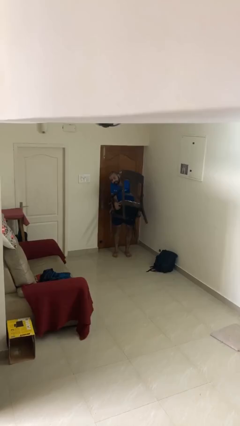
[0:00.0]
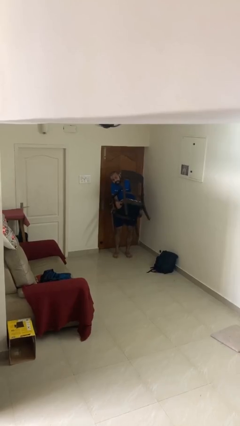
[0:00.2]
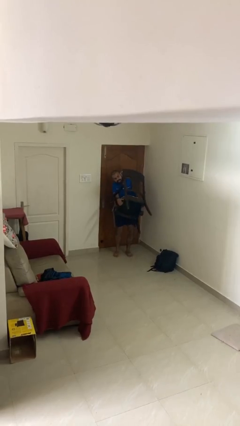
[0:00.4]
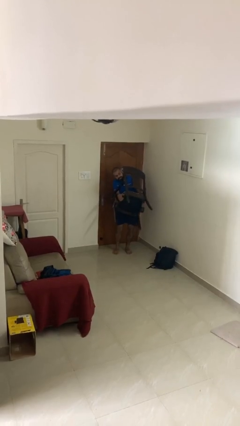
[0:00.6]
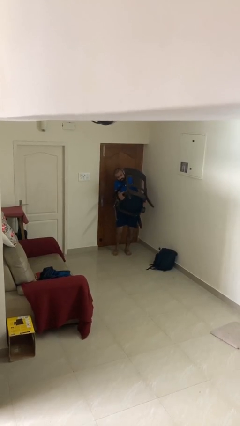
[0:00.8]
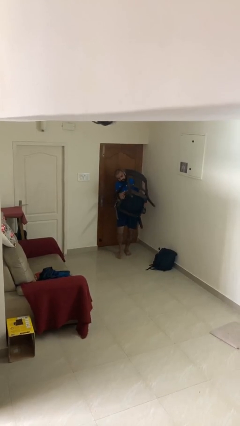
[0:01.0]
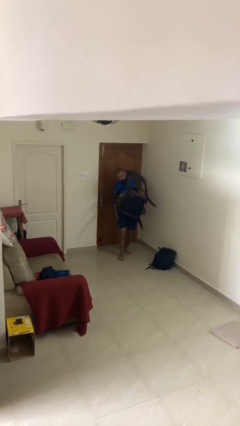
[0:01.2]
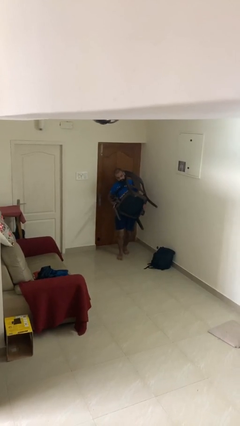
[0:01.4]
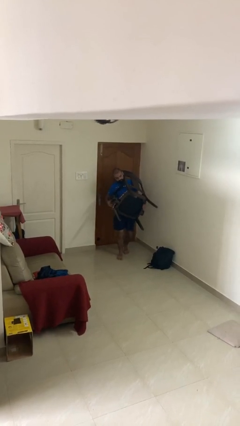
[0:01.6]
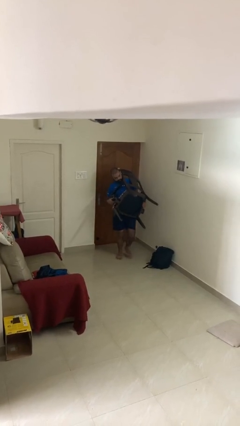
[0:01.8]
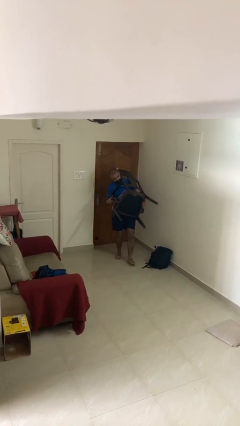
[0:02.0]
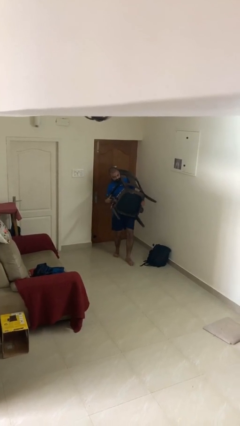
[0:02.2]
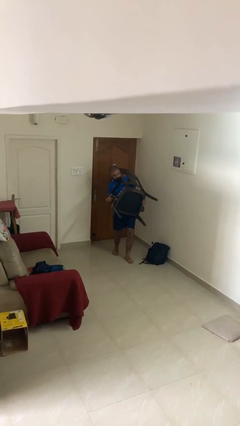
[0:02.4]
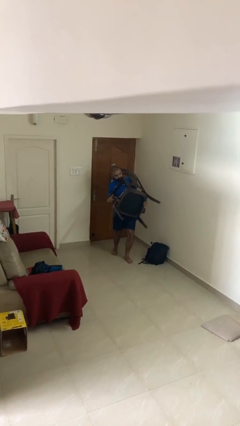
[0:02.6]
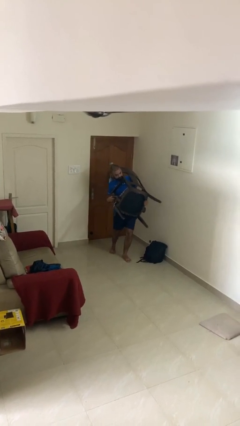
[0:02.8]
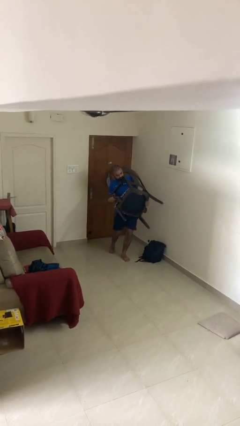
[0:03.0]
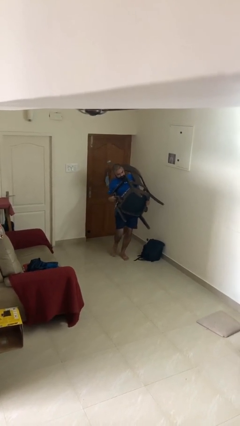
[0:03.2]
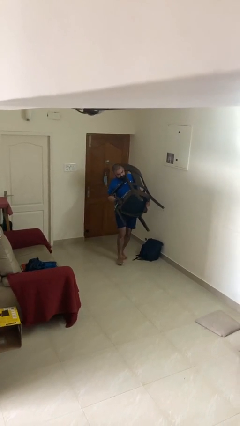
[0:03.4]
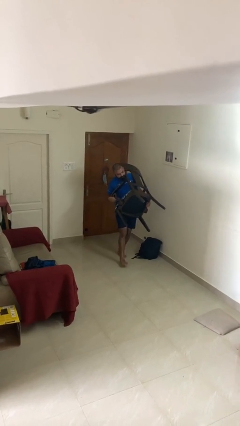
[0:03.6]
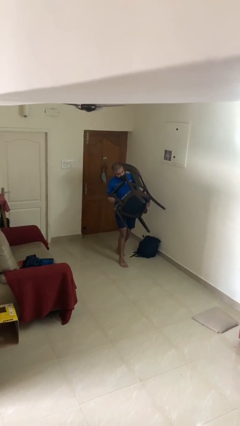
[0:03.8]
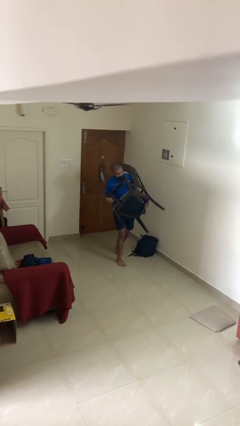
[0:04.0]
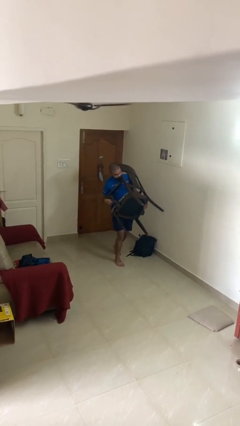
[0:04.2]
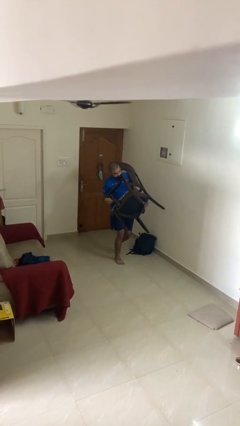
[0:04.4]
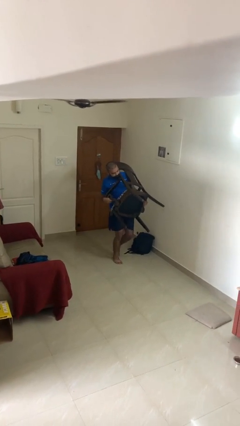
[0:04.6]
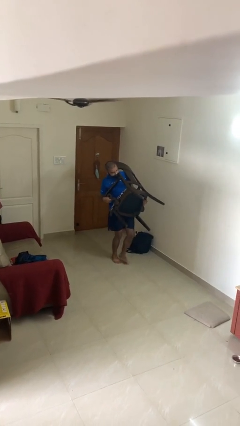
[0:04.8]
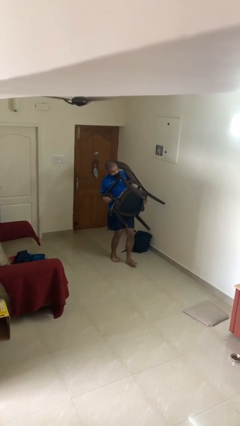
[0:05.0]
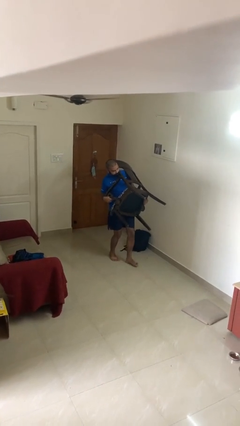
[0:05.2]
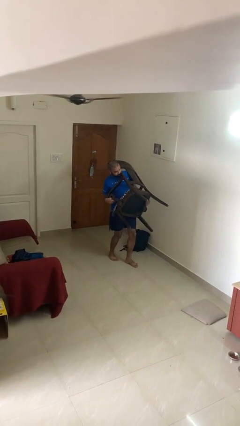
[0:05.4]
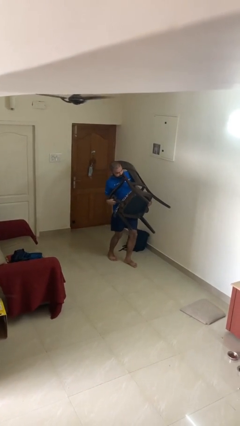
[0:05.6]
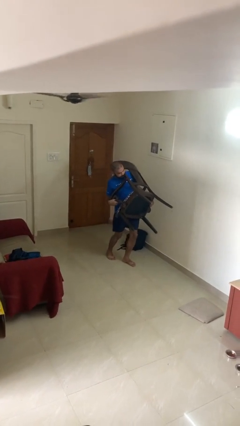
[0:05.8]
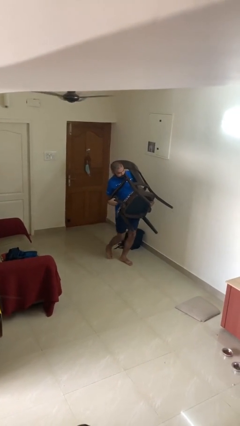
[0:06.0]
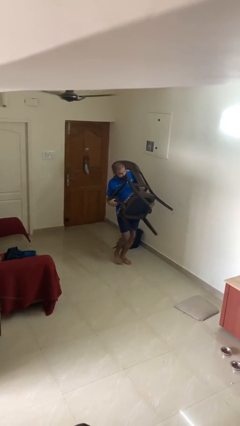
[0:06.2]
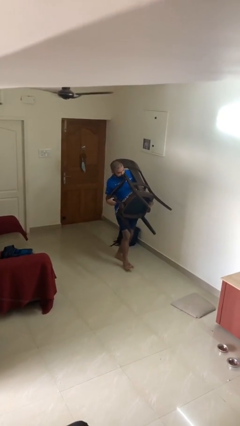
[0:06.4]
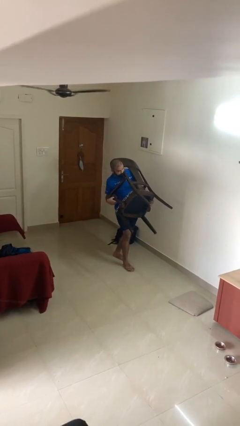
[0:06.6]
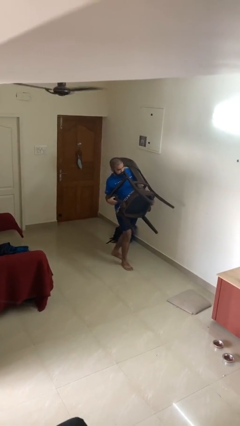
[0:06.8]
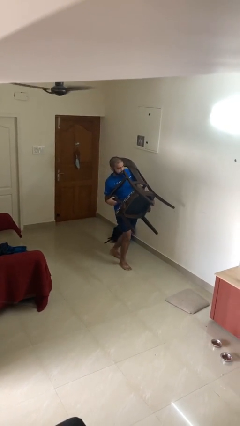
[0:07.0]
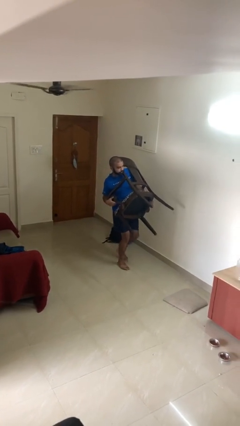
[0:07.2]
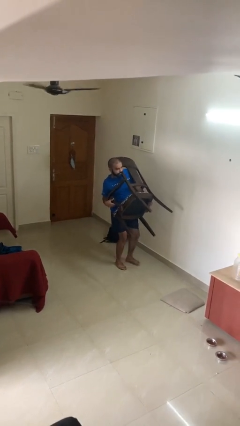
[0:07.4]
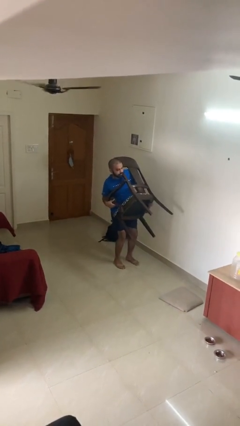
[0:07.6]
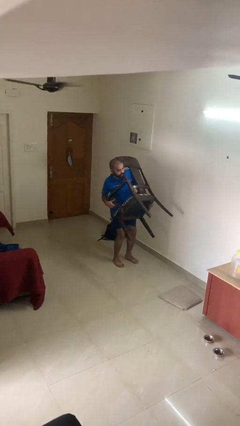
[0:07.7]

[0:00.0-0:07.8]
person carries heavy object

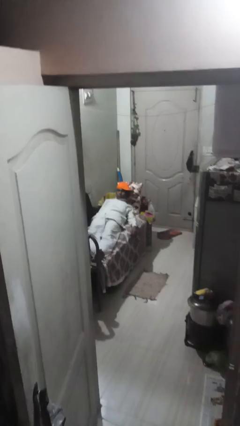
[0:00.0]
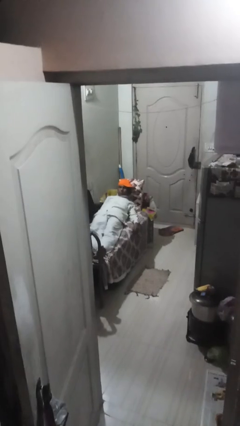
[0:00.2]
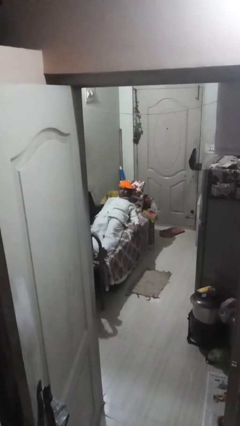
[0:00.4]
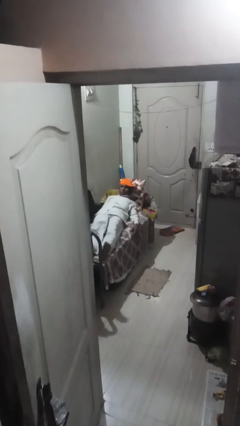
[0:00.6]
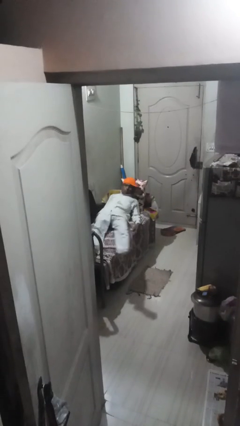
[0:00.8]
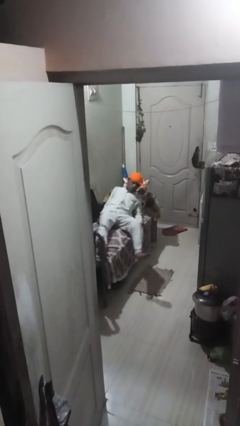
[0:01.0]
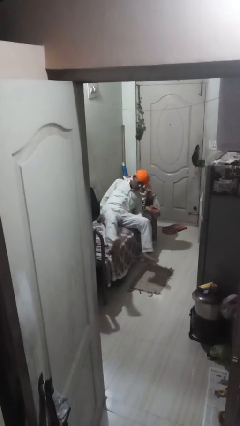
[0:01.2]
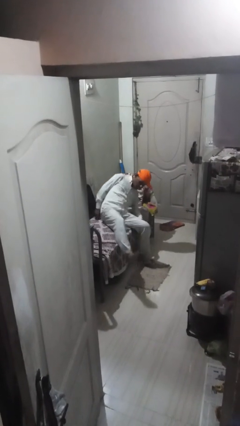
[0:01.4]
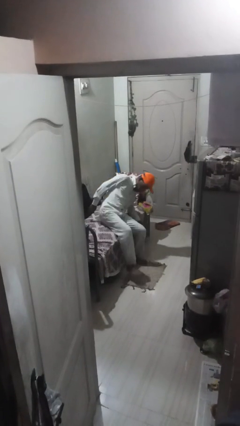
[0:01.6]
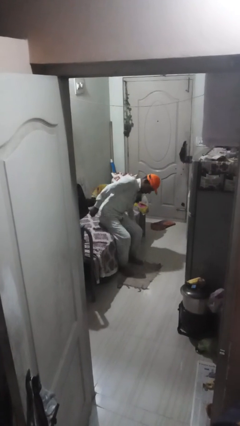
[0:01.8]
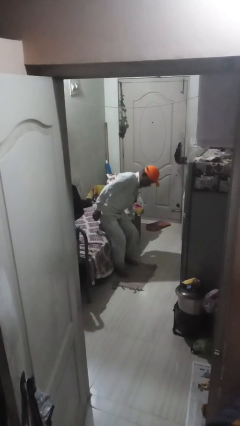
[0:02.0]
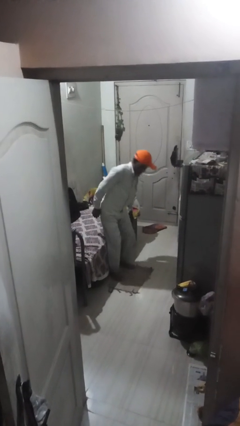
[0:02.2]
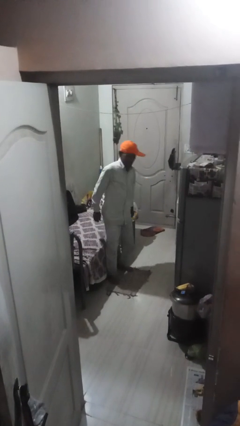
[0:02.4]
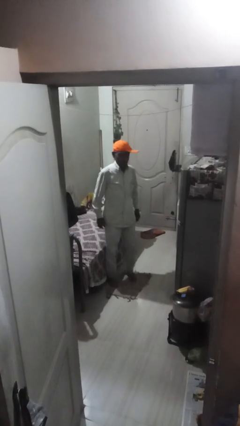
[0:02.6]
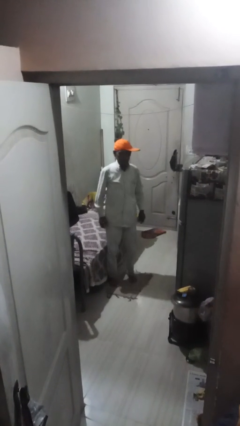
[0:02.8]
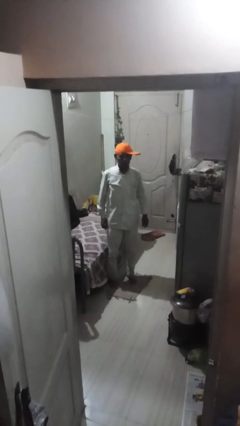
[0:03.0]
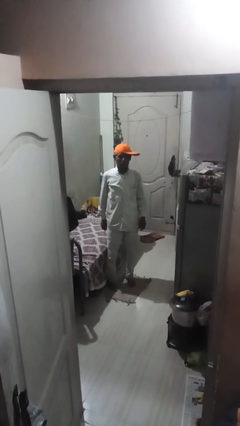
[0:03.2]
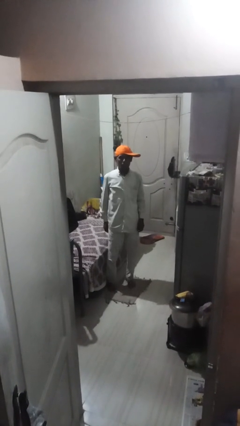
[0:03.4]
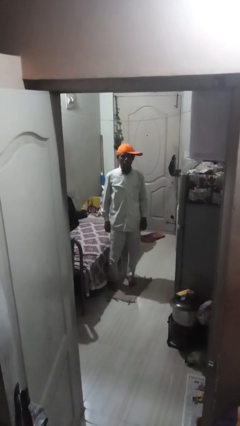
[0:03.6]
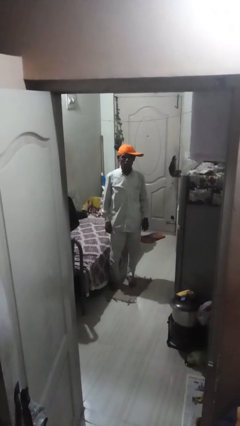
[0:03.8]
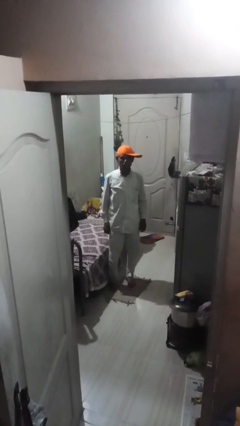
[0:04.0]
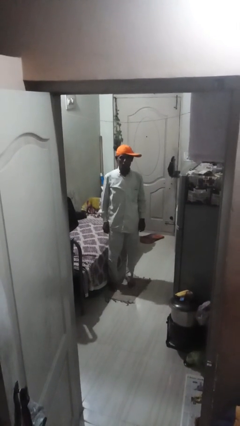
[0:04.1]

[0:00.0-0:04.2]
person stands up

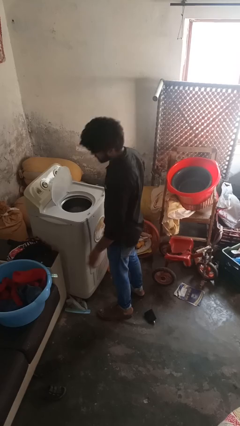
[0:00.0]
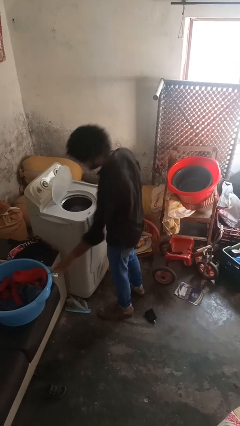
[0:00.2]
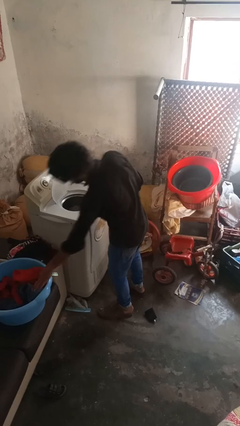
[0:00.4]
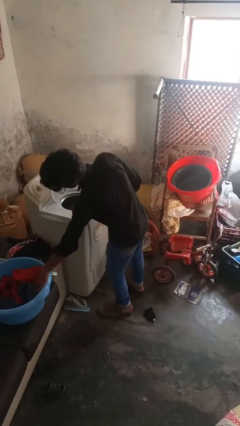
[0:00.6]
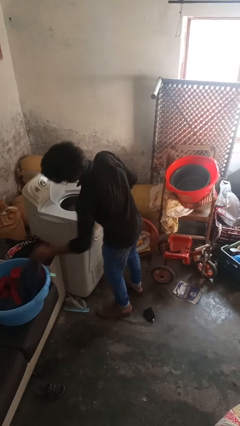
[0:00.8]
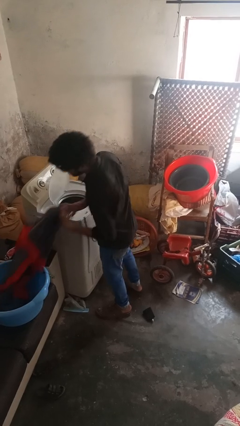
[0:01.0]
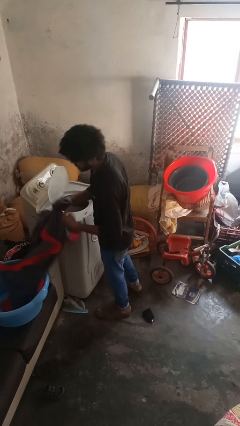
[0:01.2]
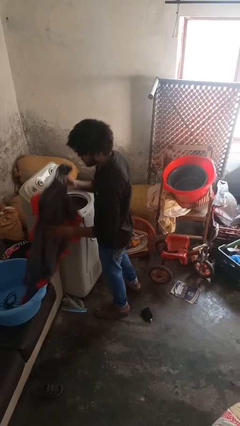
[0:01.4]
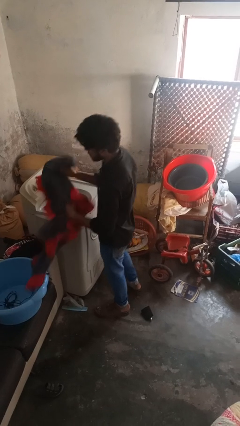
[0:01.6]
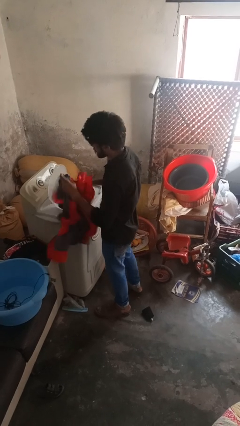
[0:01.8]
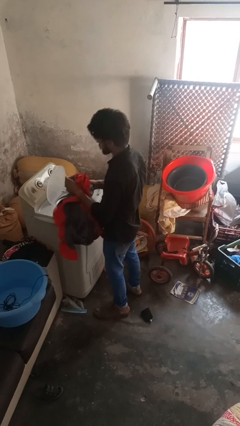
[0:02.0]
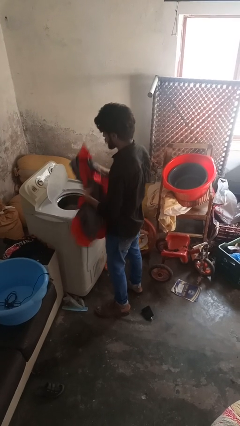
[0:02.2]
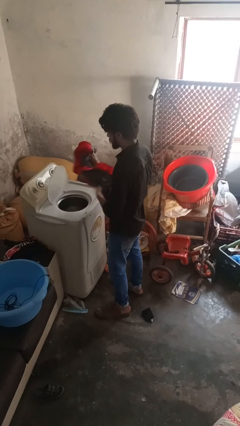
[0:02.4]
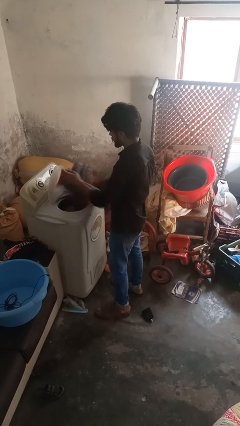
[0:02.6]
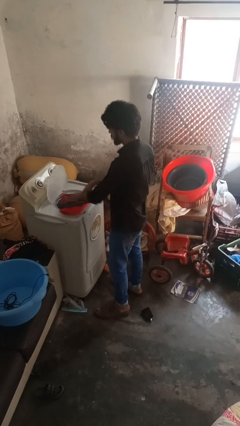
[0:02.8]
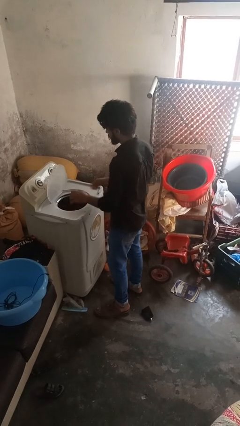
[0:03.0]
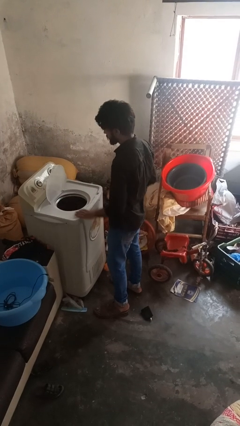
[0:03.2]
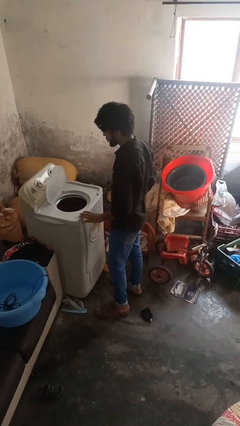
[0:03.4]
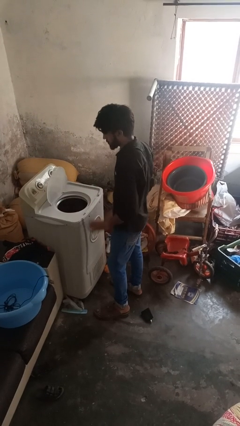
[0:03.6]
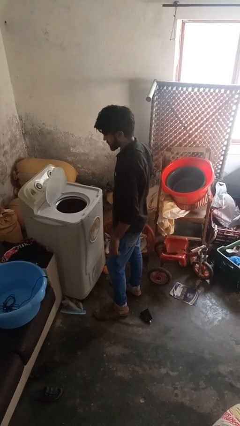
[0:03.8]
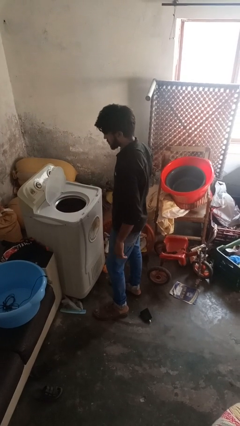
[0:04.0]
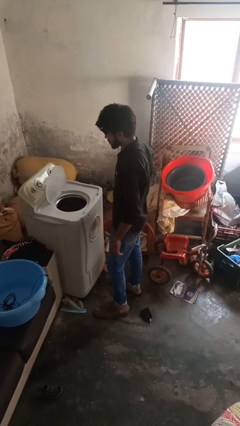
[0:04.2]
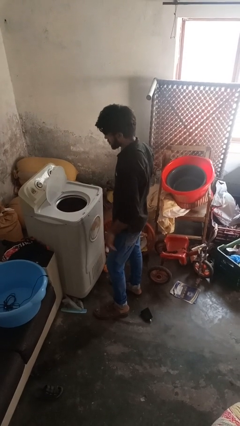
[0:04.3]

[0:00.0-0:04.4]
person loads clotheswasher

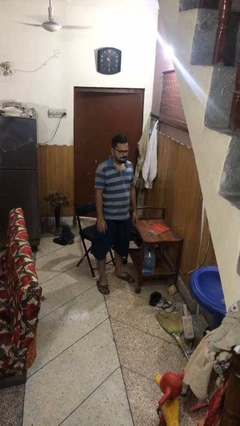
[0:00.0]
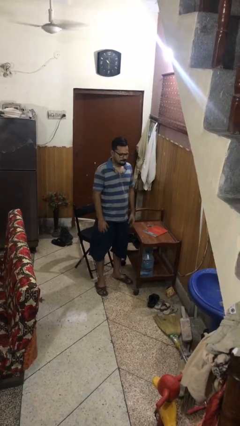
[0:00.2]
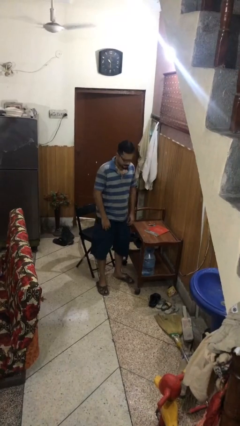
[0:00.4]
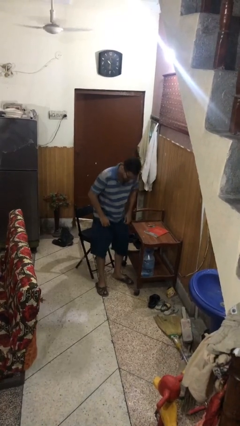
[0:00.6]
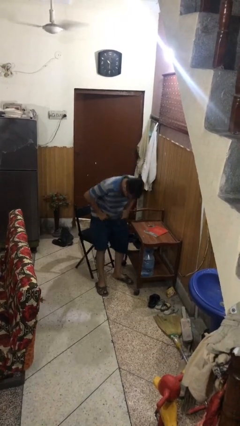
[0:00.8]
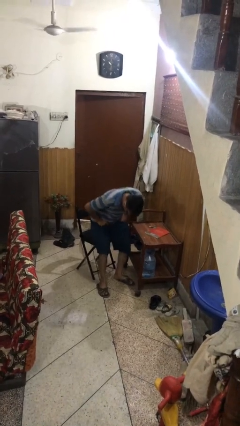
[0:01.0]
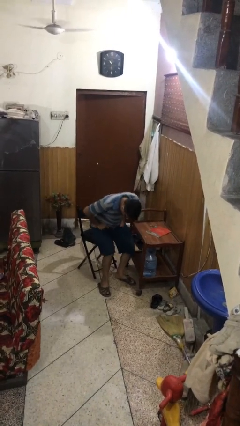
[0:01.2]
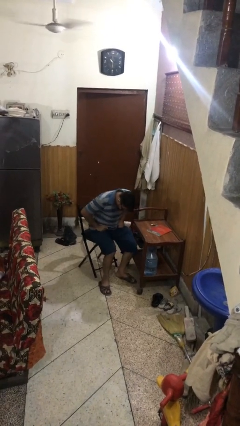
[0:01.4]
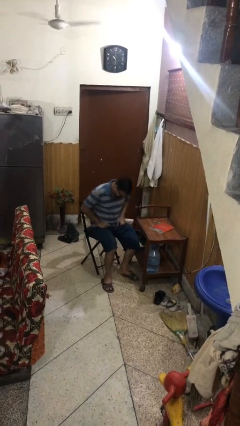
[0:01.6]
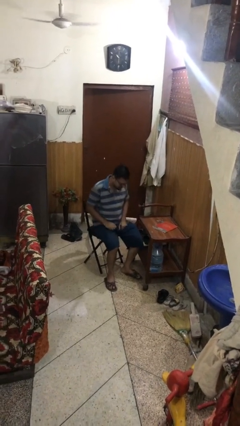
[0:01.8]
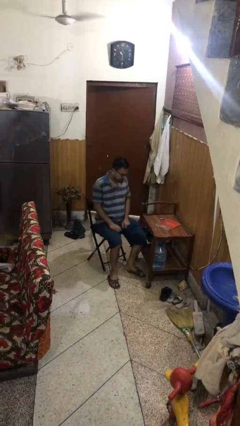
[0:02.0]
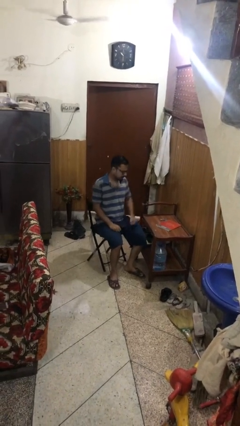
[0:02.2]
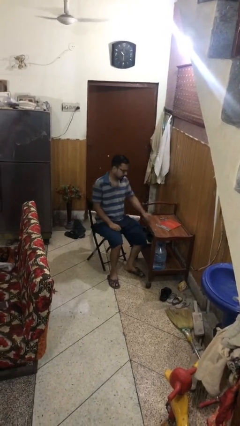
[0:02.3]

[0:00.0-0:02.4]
person sits down
